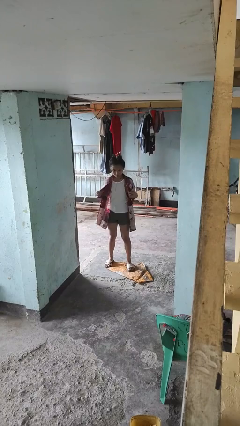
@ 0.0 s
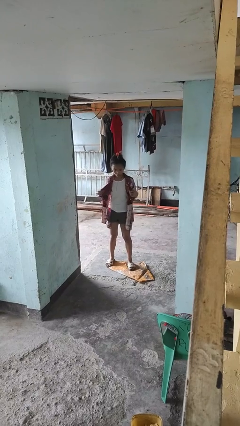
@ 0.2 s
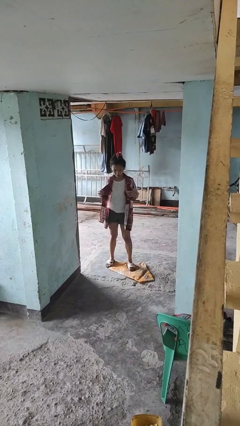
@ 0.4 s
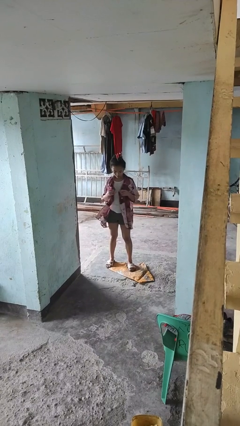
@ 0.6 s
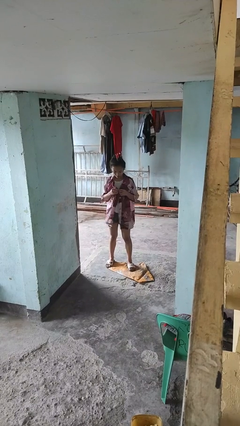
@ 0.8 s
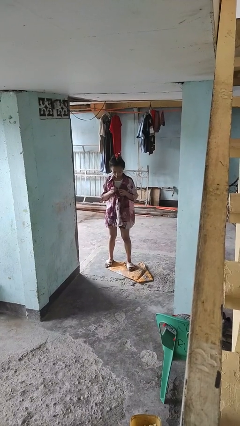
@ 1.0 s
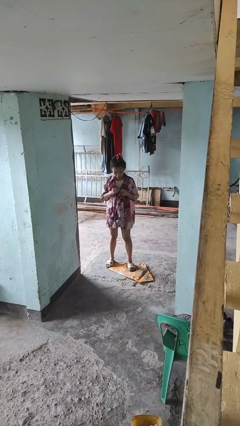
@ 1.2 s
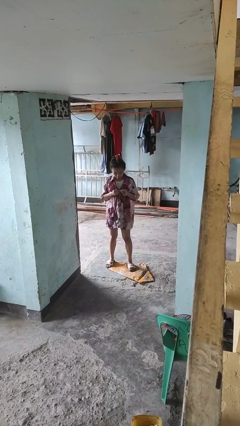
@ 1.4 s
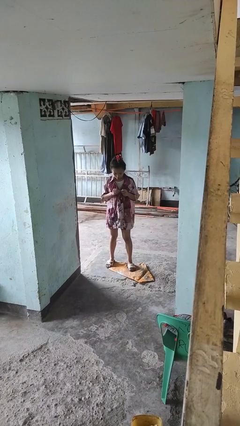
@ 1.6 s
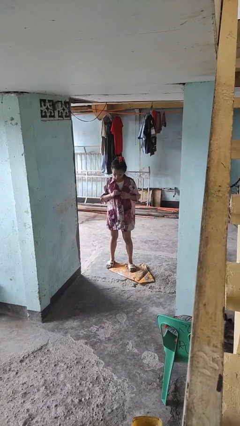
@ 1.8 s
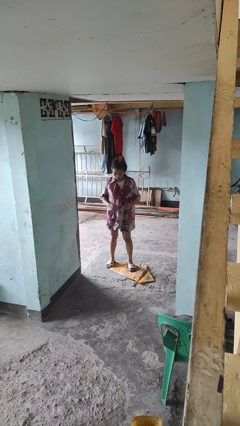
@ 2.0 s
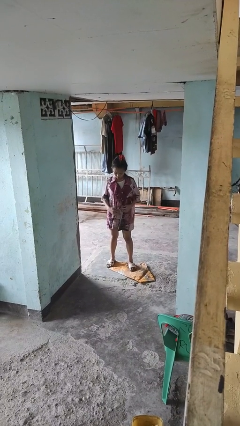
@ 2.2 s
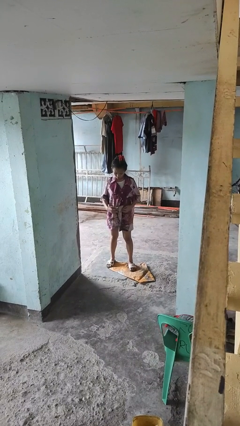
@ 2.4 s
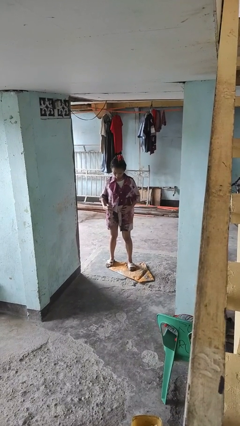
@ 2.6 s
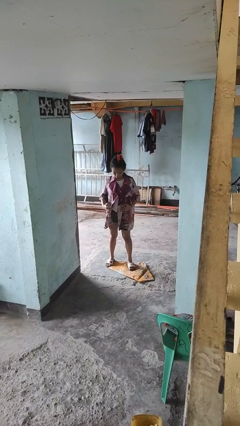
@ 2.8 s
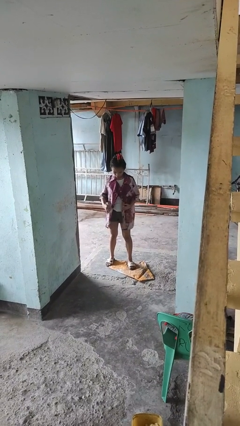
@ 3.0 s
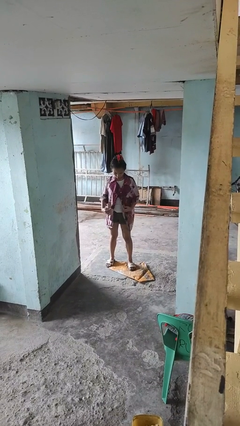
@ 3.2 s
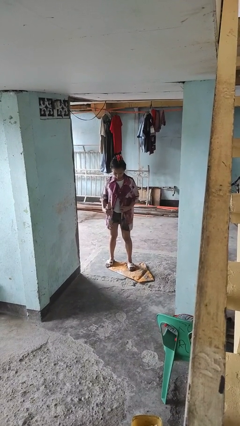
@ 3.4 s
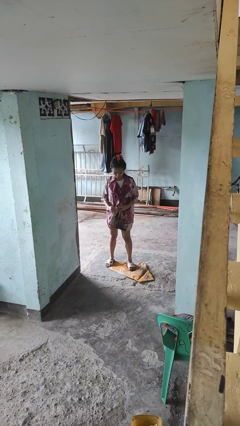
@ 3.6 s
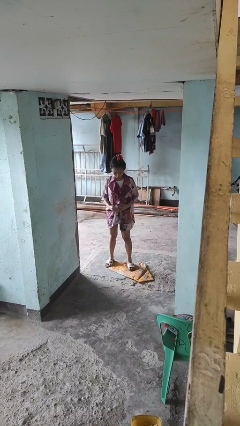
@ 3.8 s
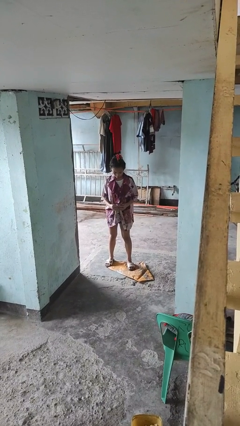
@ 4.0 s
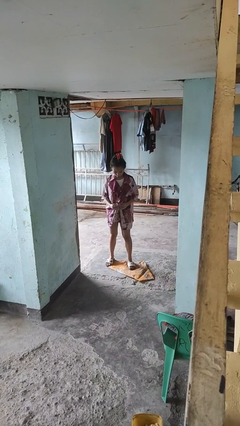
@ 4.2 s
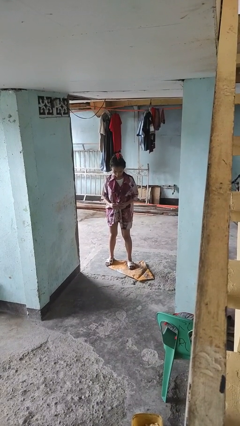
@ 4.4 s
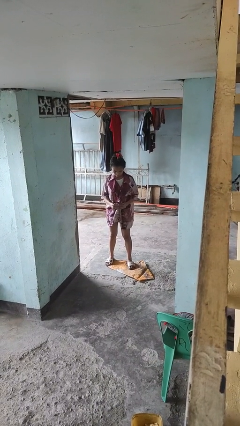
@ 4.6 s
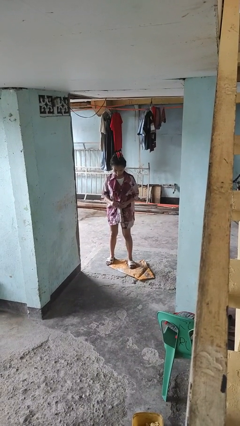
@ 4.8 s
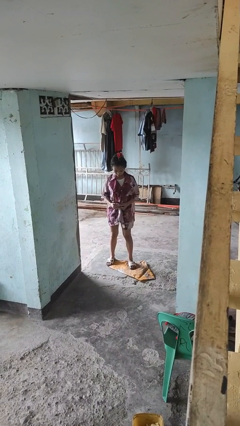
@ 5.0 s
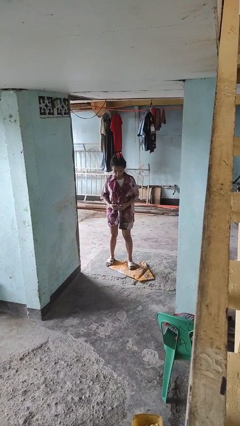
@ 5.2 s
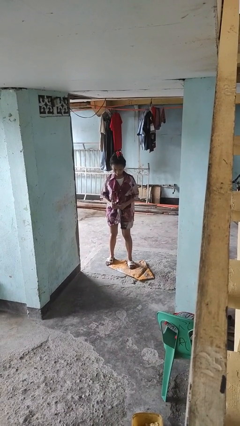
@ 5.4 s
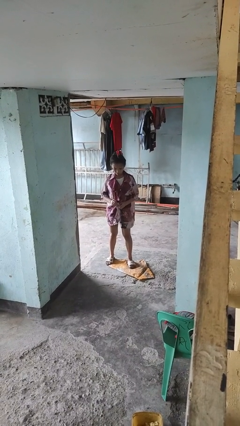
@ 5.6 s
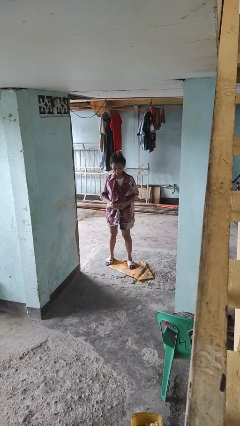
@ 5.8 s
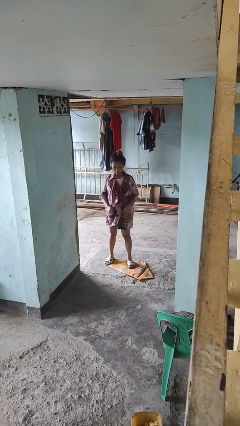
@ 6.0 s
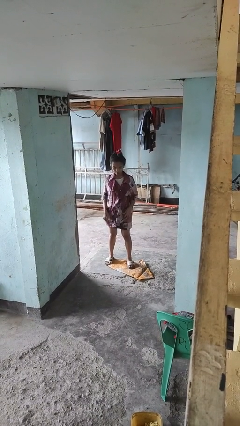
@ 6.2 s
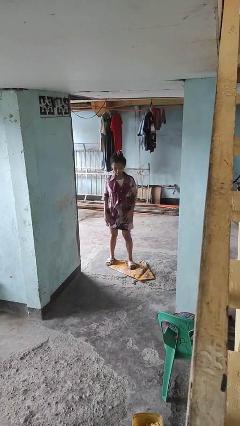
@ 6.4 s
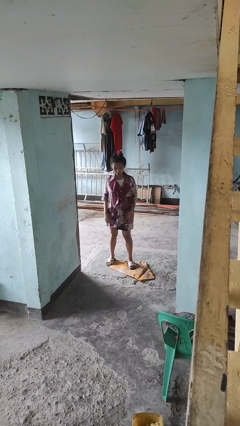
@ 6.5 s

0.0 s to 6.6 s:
person buttons shirt

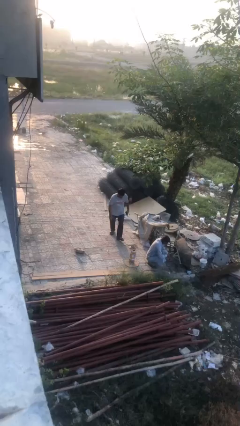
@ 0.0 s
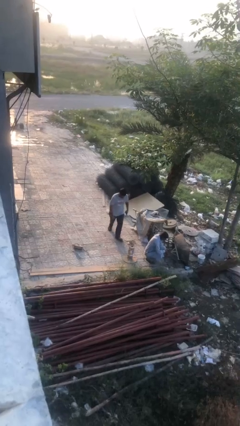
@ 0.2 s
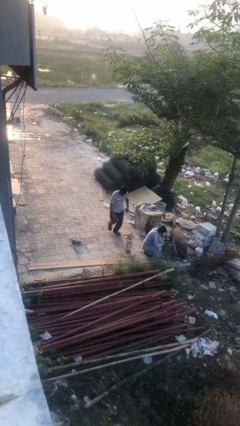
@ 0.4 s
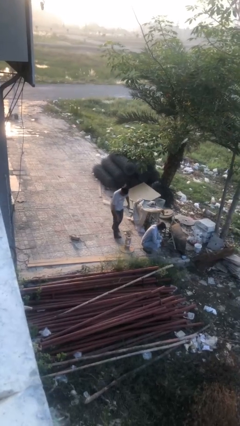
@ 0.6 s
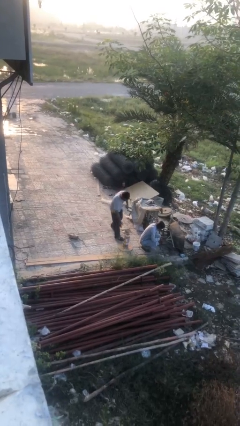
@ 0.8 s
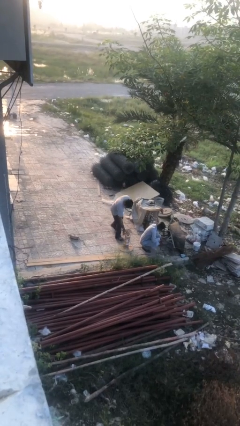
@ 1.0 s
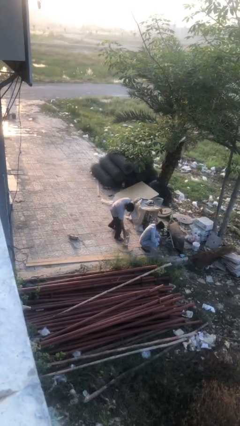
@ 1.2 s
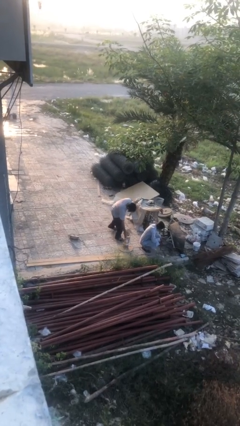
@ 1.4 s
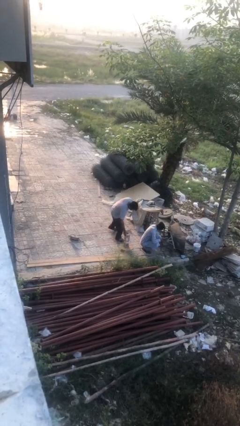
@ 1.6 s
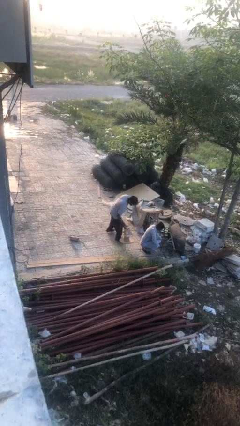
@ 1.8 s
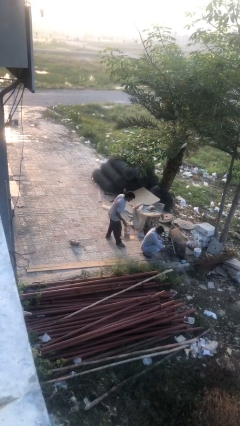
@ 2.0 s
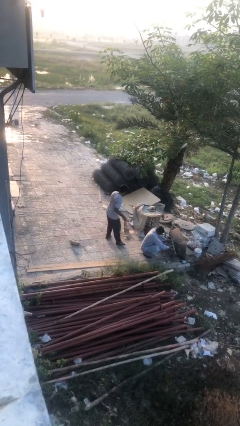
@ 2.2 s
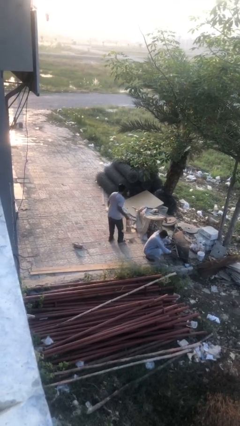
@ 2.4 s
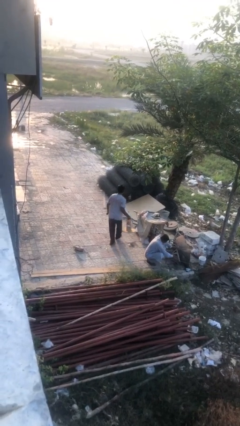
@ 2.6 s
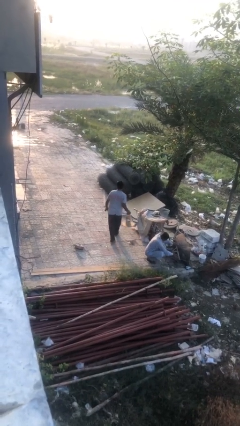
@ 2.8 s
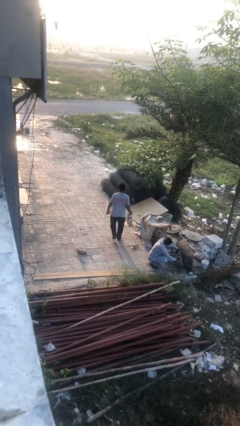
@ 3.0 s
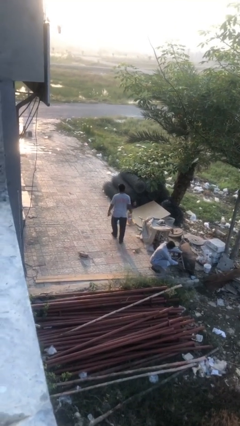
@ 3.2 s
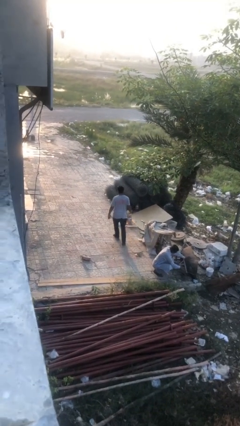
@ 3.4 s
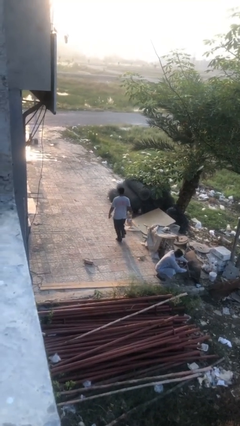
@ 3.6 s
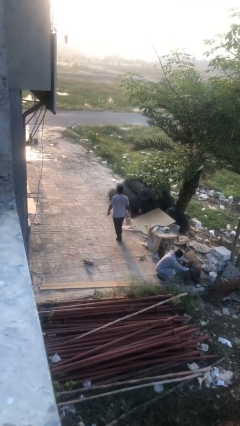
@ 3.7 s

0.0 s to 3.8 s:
person steals object from person

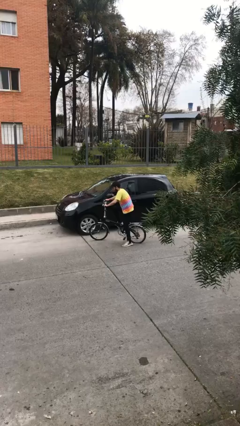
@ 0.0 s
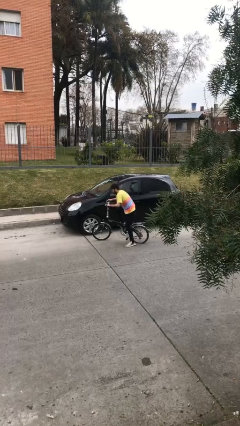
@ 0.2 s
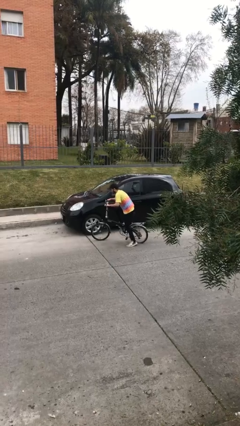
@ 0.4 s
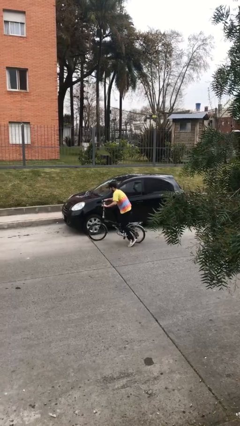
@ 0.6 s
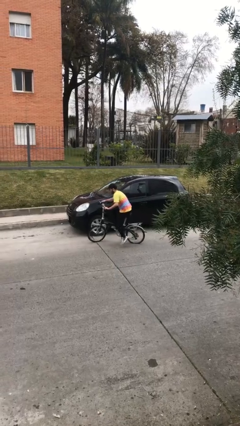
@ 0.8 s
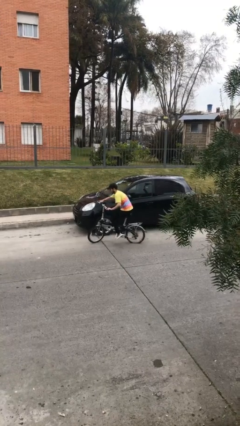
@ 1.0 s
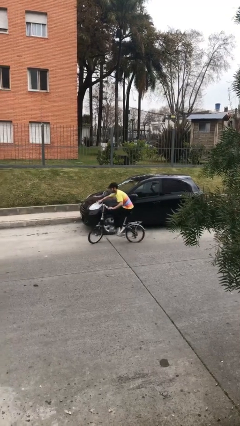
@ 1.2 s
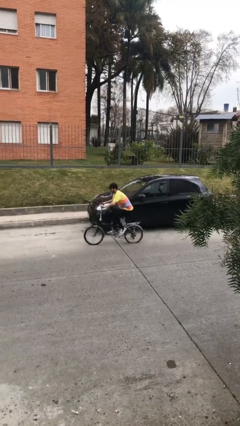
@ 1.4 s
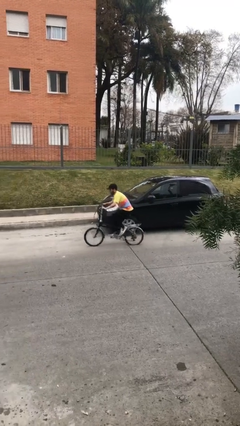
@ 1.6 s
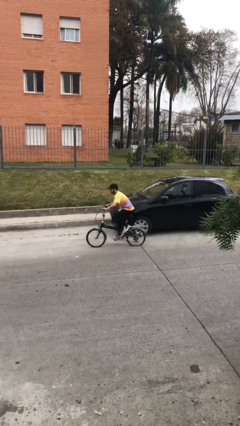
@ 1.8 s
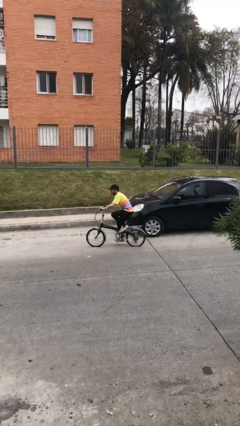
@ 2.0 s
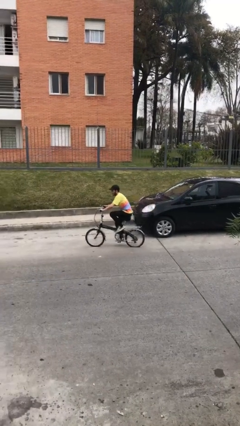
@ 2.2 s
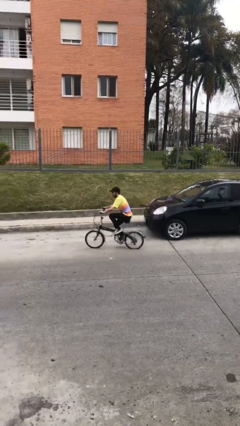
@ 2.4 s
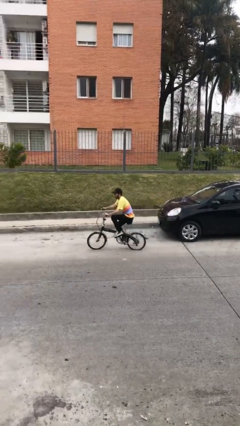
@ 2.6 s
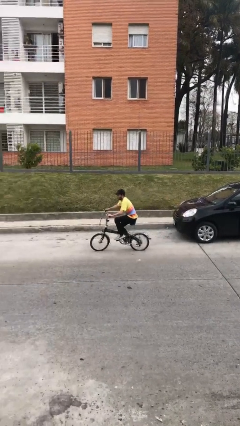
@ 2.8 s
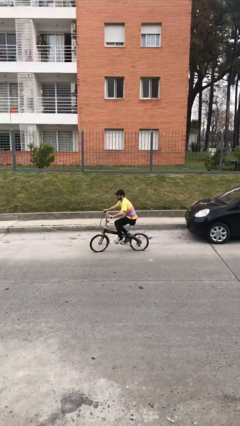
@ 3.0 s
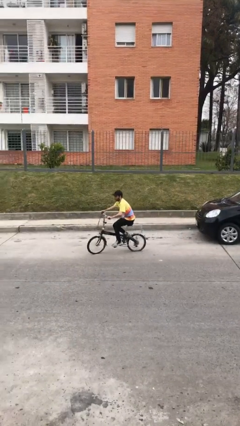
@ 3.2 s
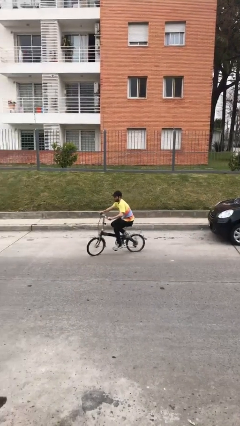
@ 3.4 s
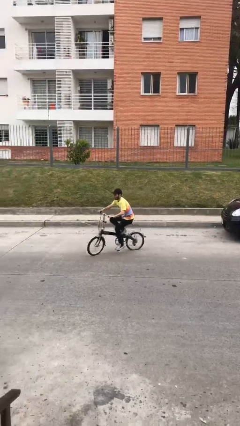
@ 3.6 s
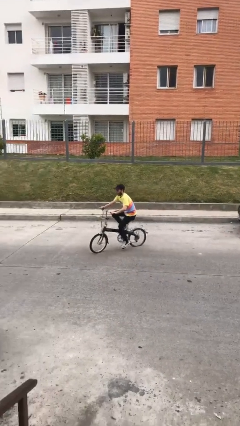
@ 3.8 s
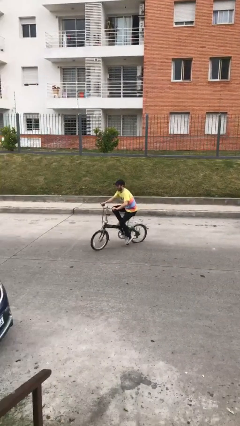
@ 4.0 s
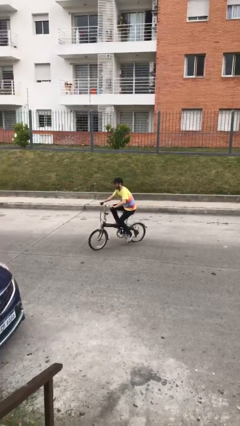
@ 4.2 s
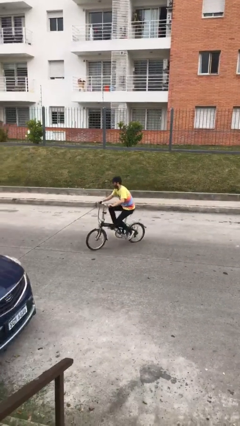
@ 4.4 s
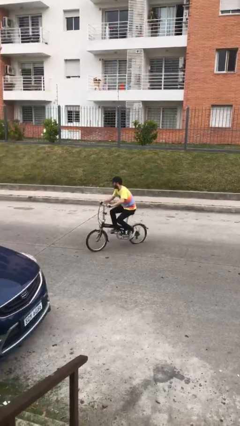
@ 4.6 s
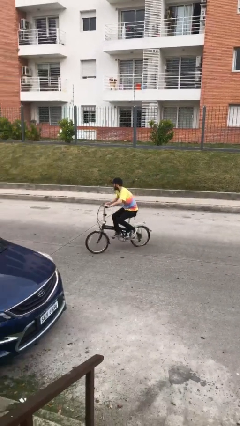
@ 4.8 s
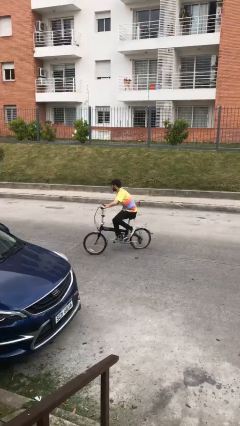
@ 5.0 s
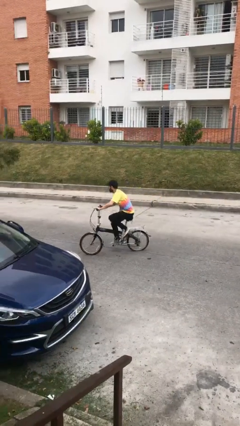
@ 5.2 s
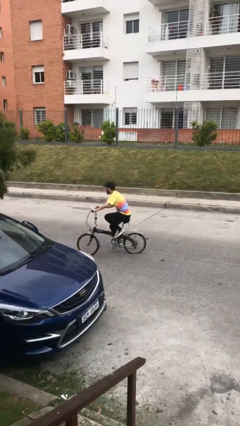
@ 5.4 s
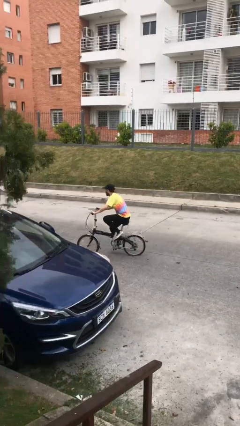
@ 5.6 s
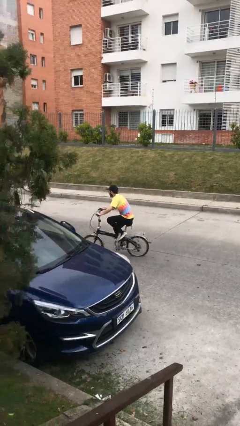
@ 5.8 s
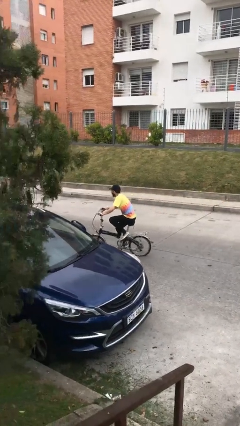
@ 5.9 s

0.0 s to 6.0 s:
person rides bicycle

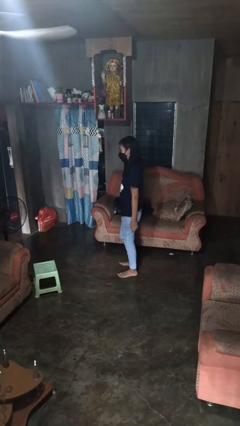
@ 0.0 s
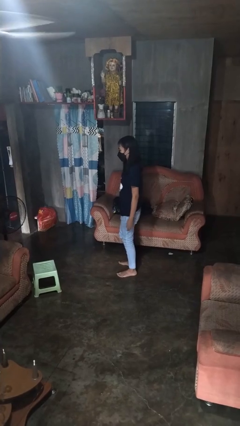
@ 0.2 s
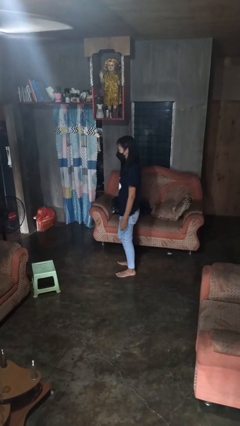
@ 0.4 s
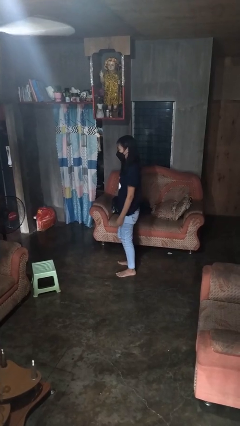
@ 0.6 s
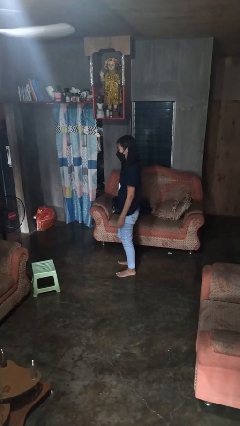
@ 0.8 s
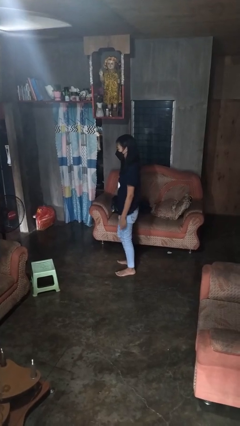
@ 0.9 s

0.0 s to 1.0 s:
person puts hands in back pockets

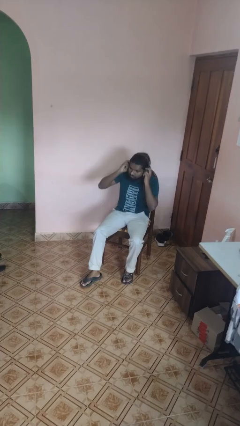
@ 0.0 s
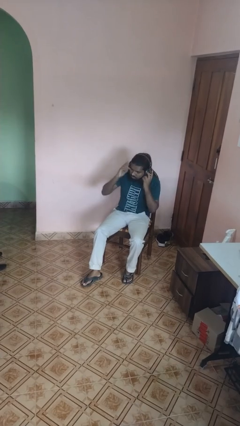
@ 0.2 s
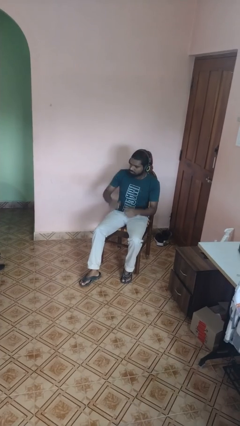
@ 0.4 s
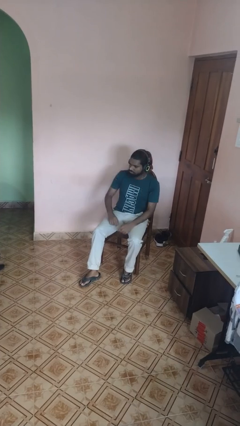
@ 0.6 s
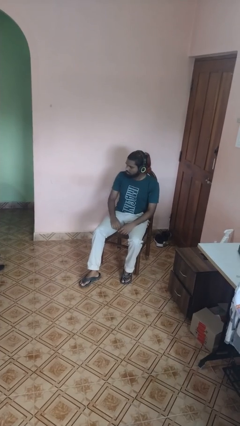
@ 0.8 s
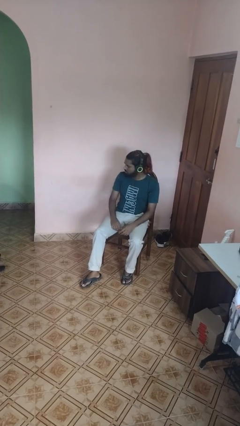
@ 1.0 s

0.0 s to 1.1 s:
person puts on headphones
